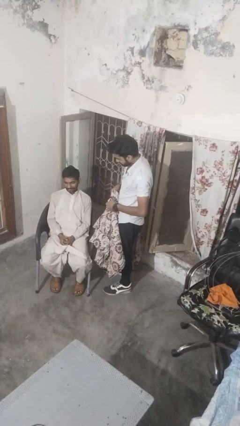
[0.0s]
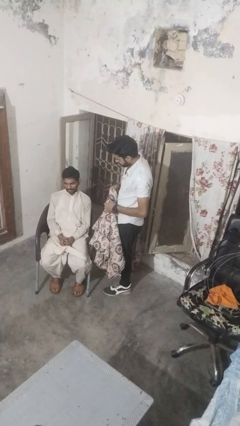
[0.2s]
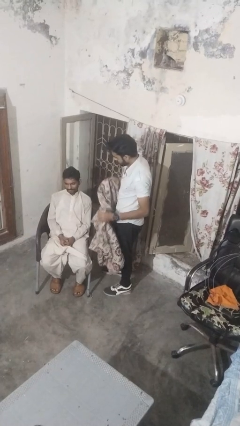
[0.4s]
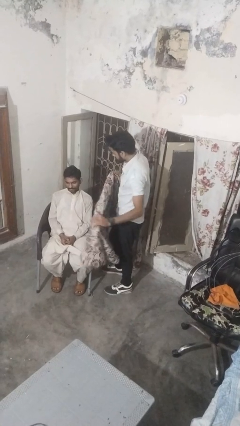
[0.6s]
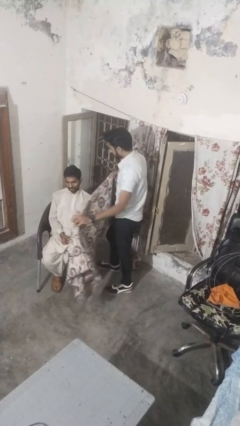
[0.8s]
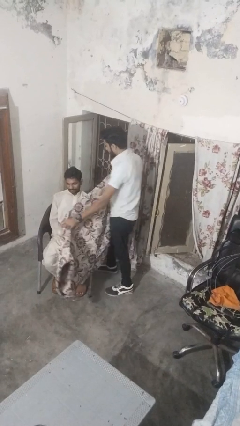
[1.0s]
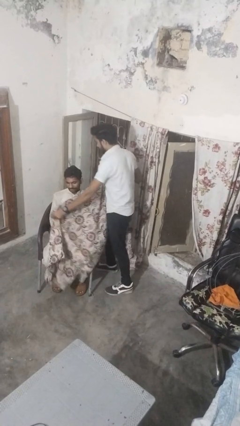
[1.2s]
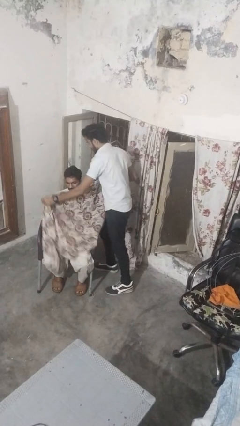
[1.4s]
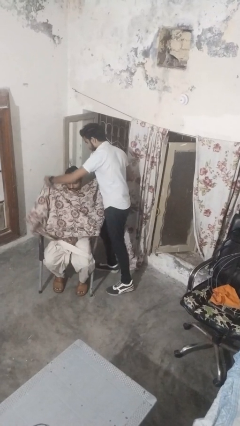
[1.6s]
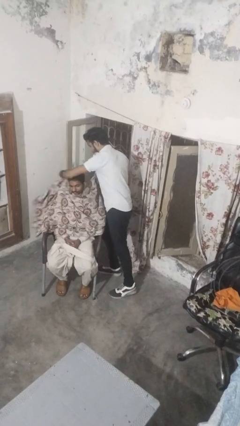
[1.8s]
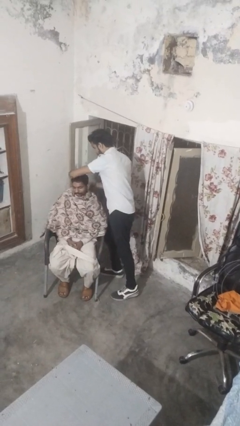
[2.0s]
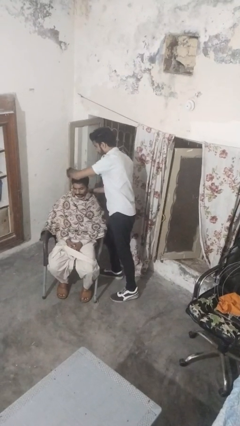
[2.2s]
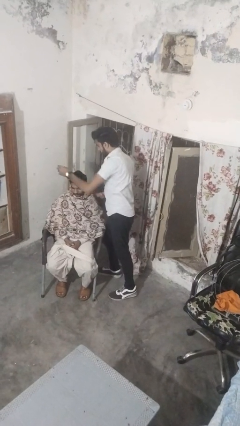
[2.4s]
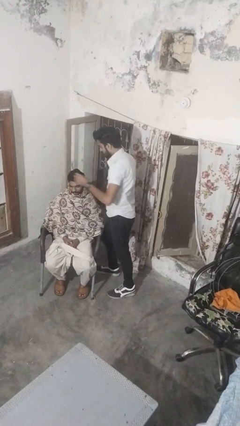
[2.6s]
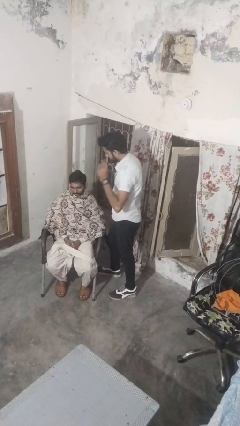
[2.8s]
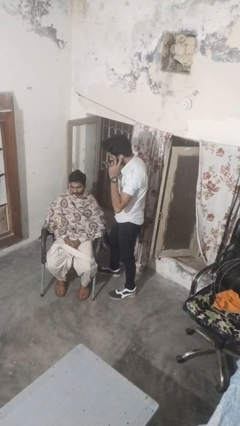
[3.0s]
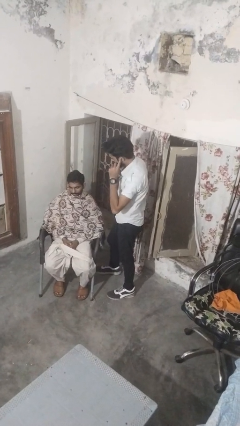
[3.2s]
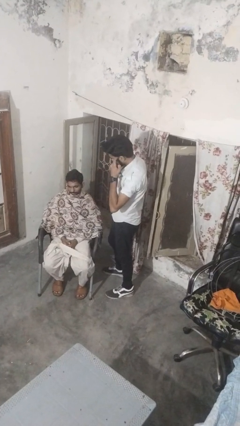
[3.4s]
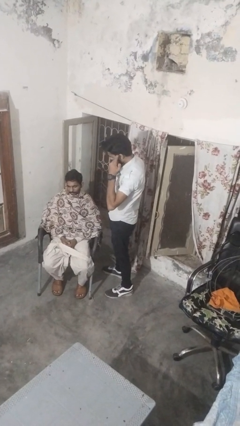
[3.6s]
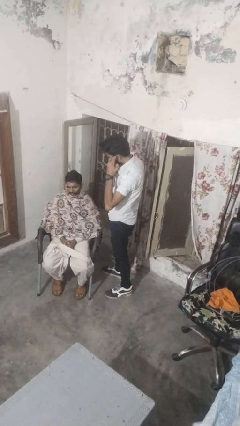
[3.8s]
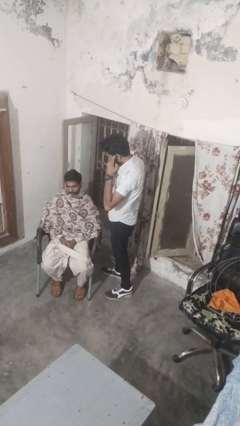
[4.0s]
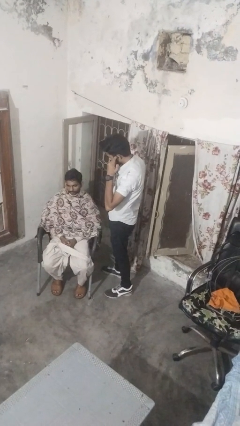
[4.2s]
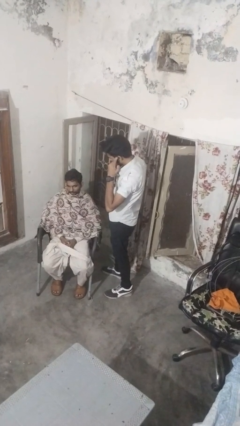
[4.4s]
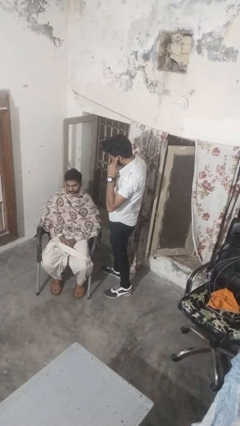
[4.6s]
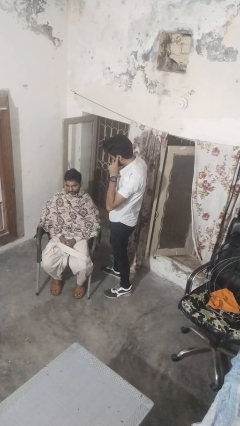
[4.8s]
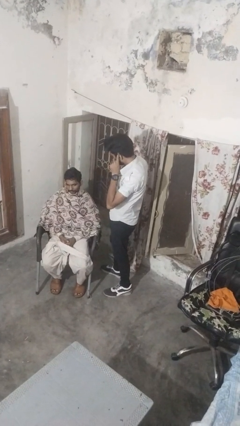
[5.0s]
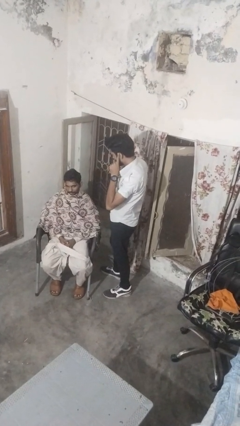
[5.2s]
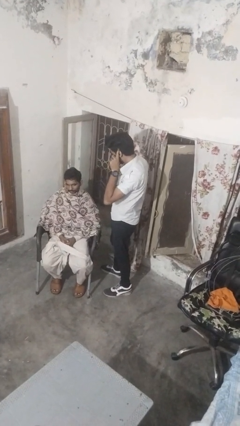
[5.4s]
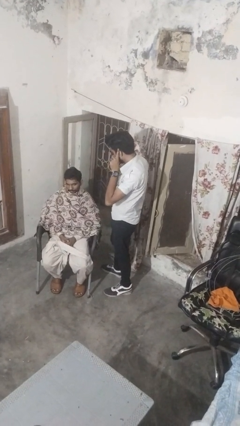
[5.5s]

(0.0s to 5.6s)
person covers friend with blanket

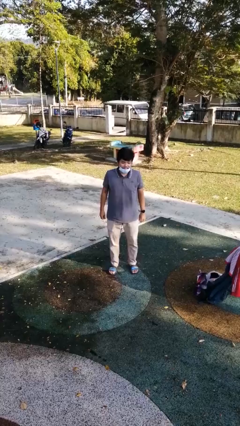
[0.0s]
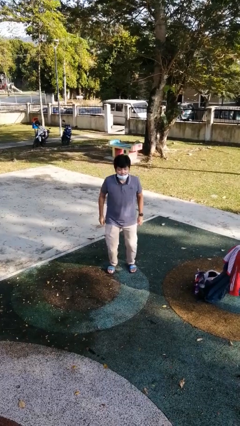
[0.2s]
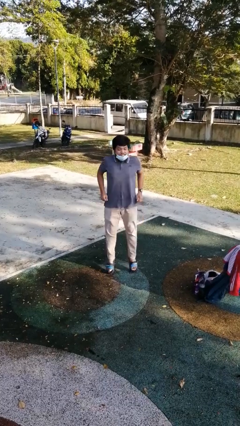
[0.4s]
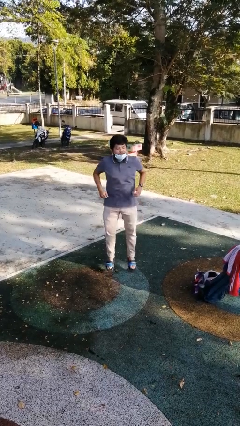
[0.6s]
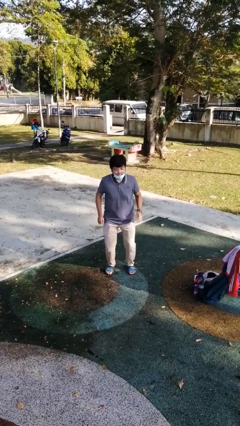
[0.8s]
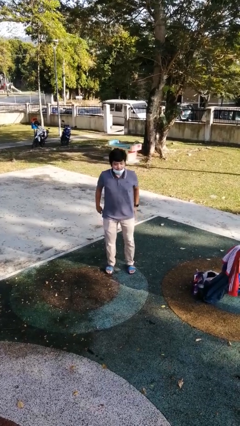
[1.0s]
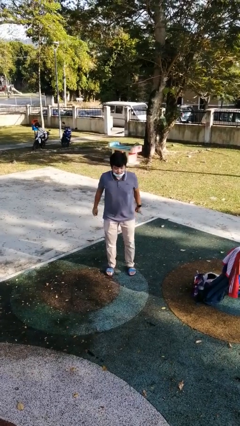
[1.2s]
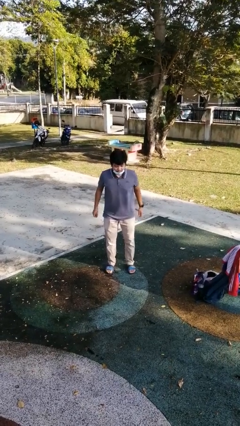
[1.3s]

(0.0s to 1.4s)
person jumps

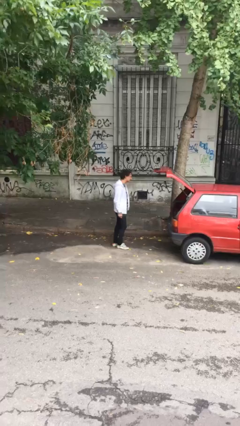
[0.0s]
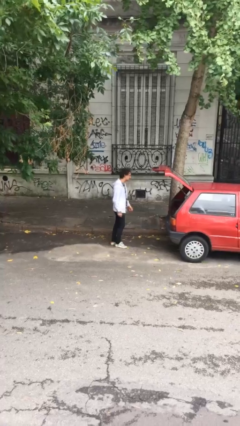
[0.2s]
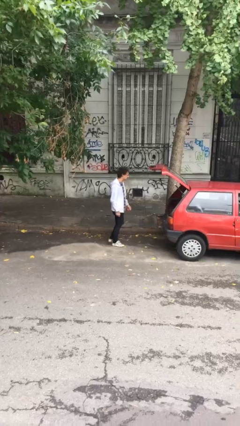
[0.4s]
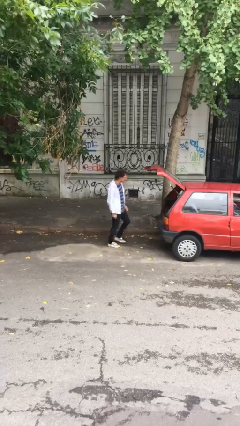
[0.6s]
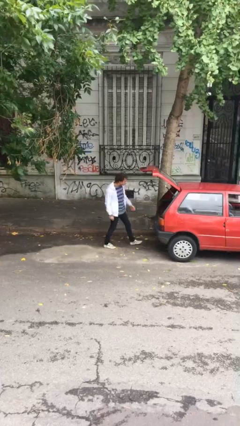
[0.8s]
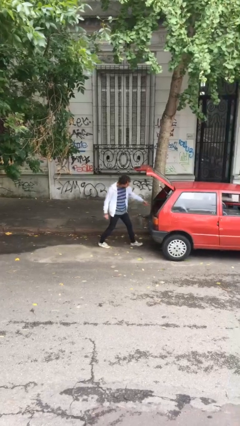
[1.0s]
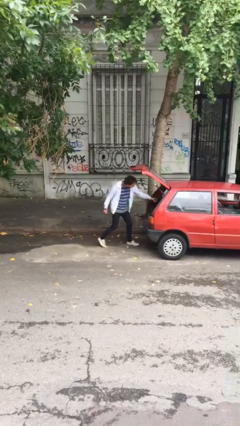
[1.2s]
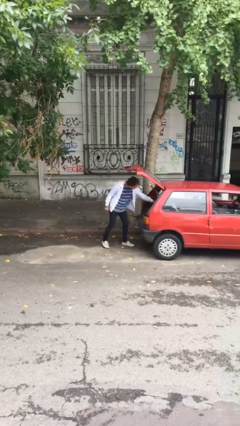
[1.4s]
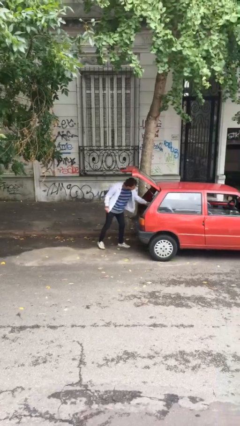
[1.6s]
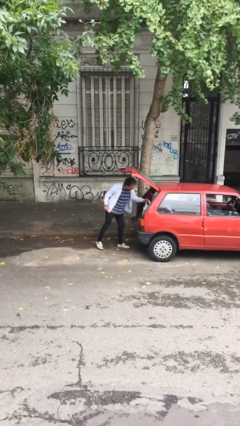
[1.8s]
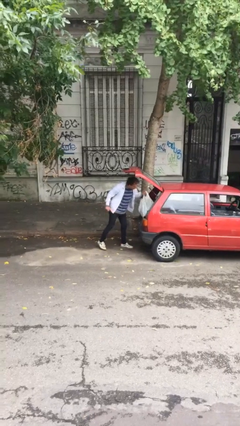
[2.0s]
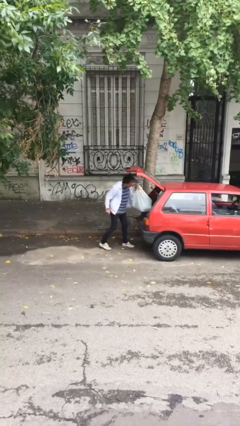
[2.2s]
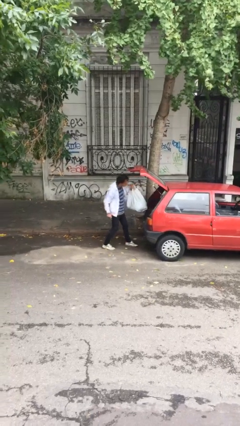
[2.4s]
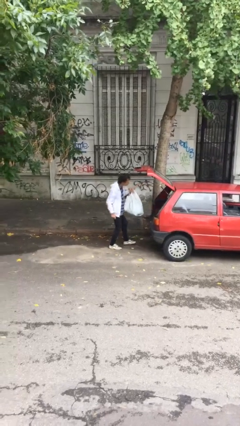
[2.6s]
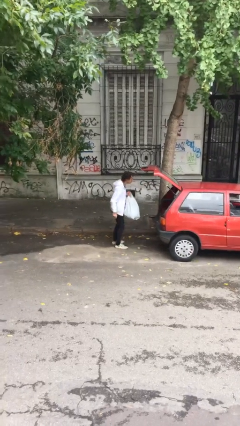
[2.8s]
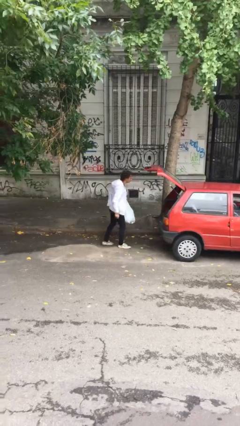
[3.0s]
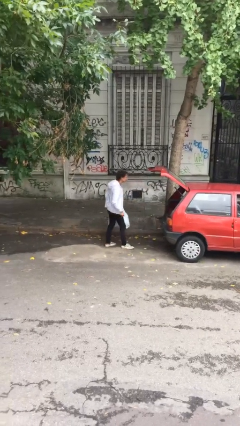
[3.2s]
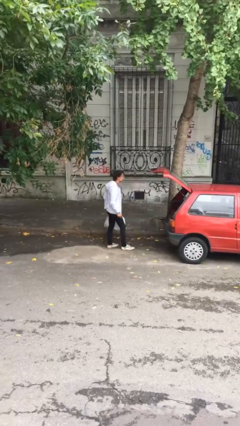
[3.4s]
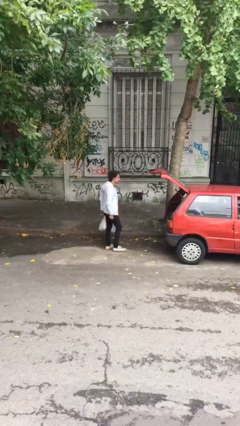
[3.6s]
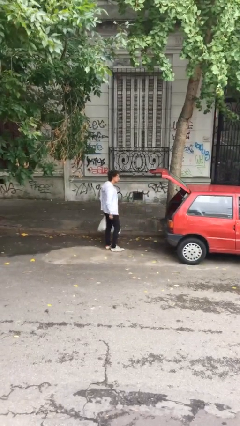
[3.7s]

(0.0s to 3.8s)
person unloads car

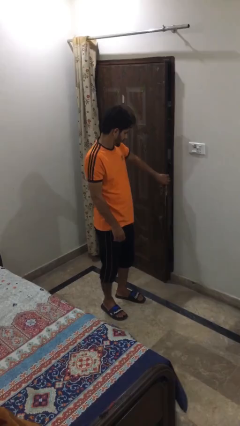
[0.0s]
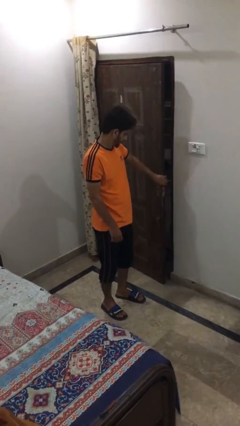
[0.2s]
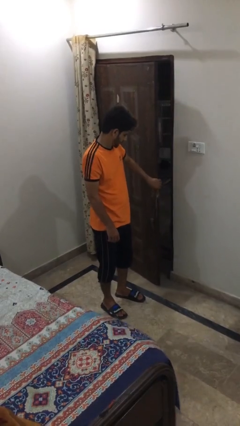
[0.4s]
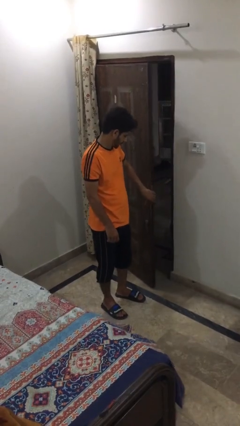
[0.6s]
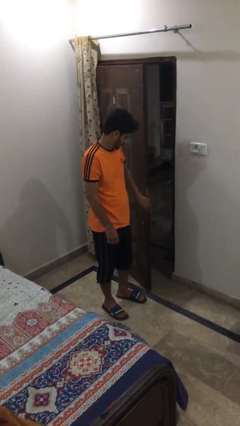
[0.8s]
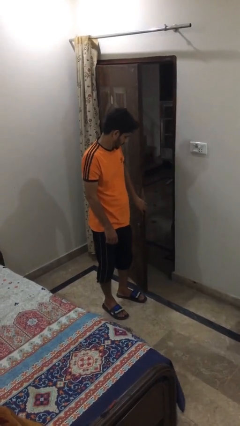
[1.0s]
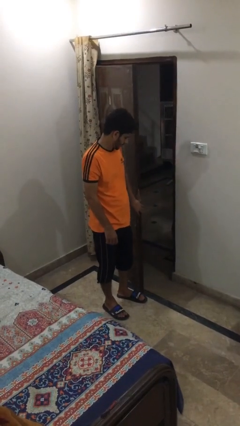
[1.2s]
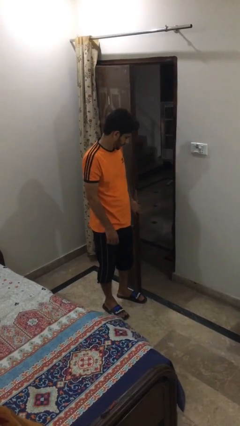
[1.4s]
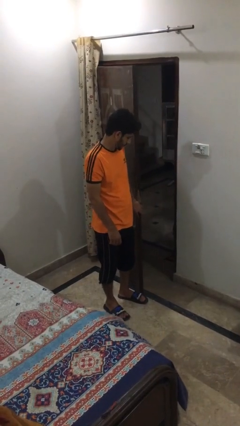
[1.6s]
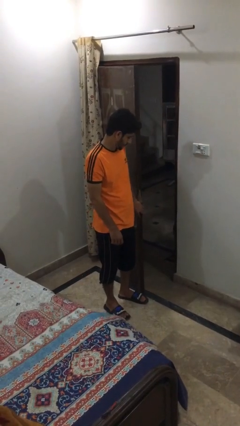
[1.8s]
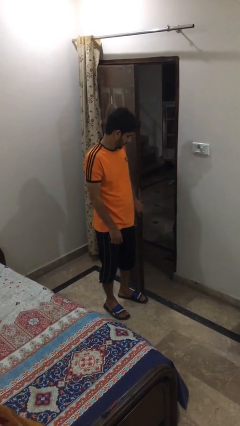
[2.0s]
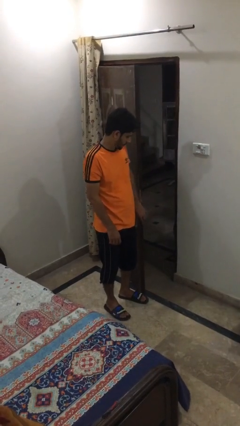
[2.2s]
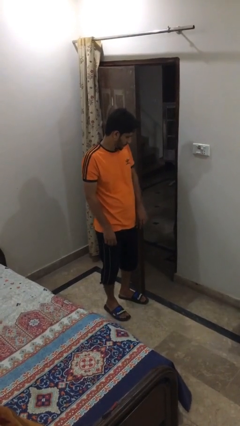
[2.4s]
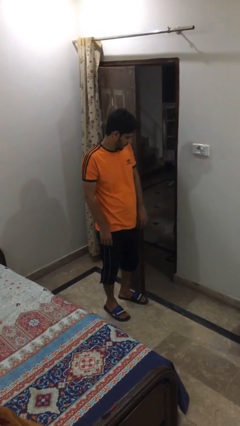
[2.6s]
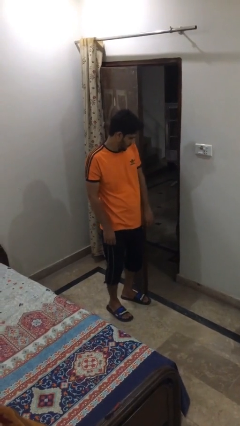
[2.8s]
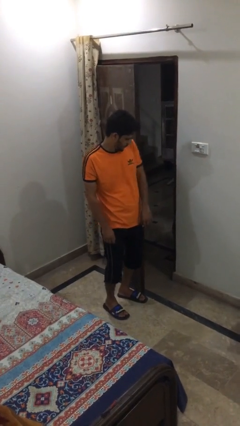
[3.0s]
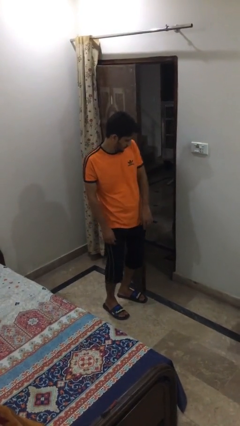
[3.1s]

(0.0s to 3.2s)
person opens facility door

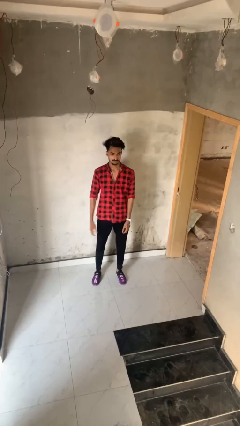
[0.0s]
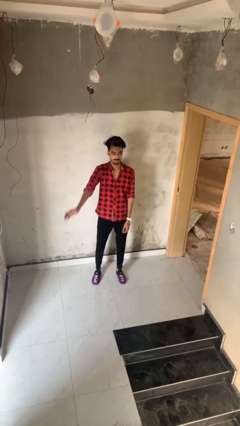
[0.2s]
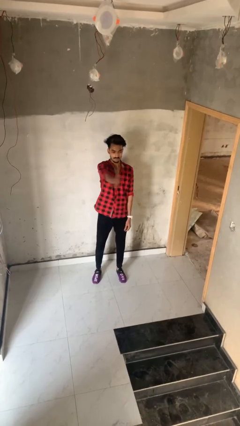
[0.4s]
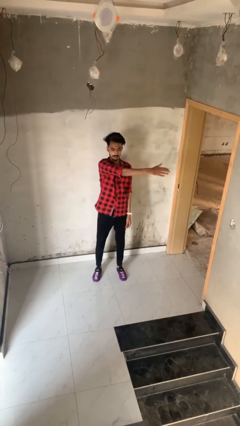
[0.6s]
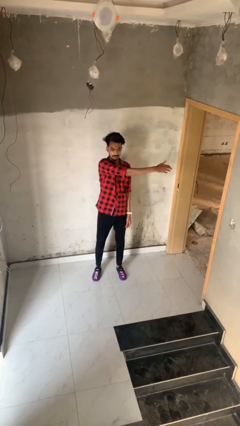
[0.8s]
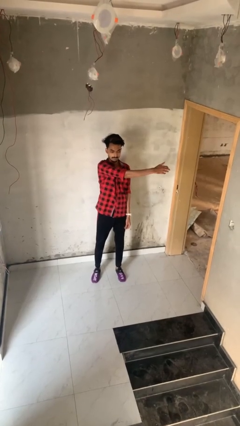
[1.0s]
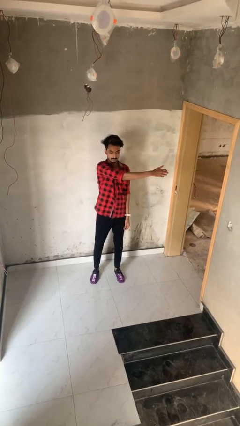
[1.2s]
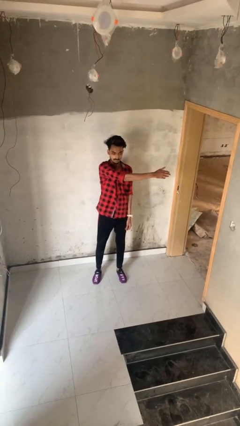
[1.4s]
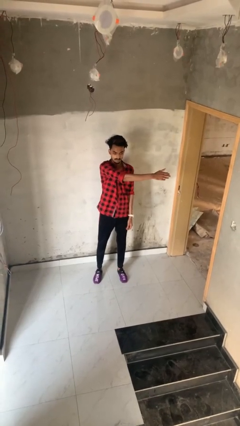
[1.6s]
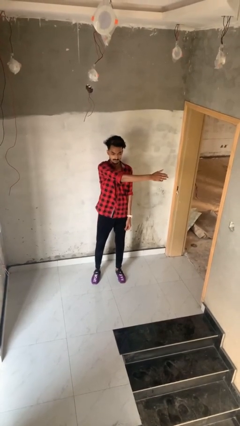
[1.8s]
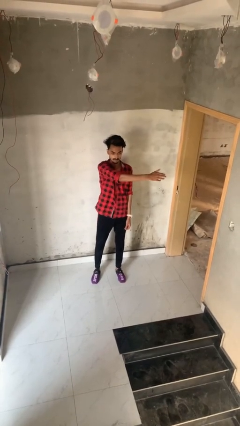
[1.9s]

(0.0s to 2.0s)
person gestures swipe left

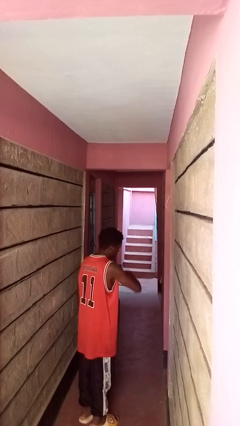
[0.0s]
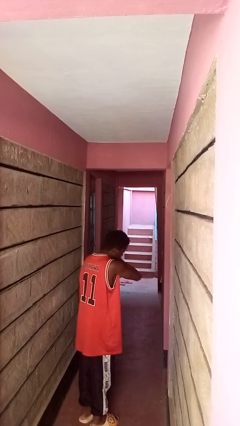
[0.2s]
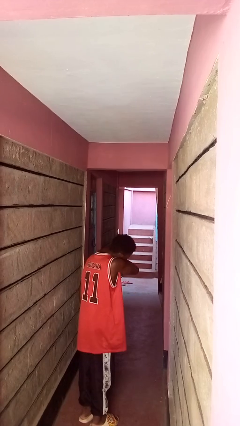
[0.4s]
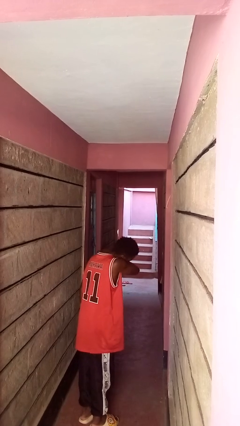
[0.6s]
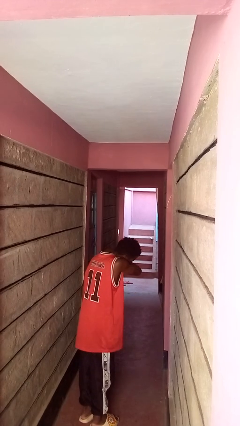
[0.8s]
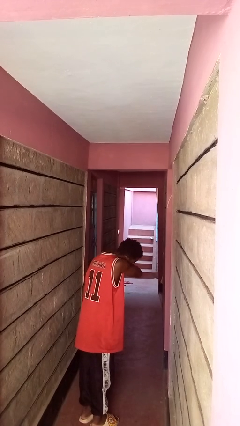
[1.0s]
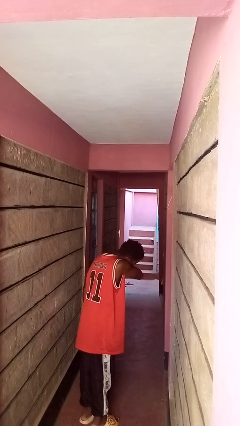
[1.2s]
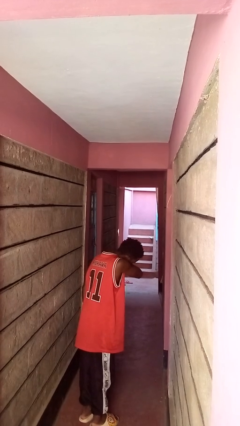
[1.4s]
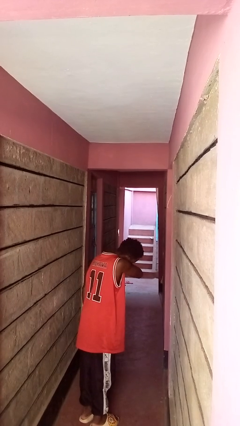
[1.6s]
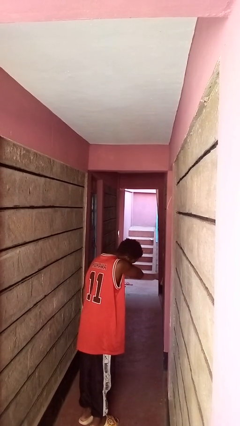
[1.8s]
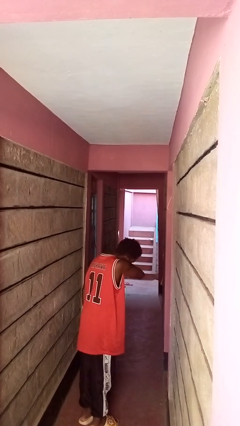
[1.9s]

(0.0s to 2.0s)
person sneezes into arm
